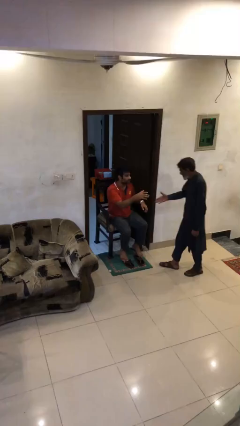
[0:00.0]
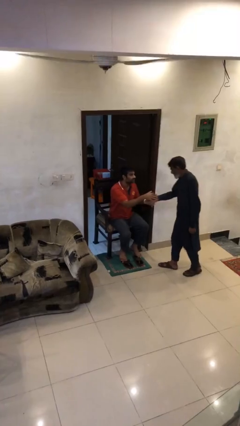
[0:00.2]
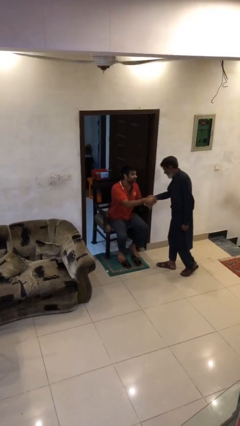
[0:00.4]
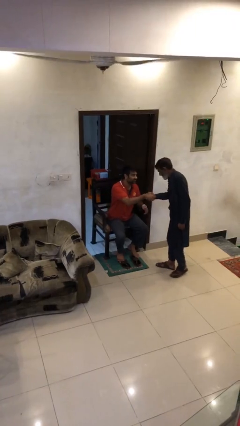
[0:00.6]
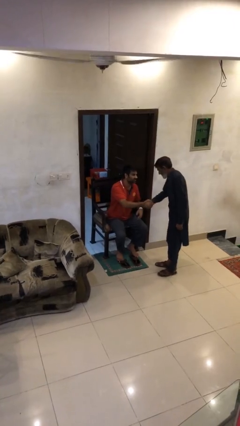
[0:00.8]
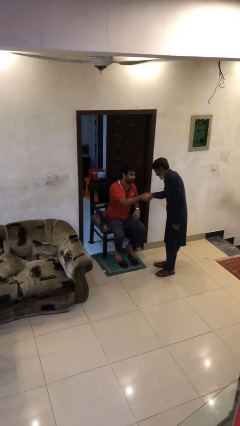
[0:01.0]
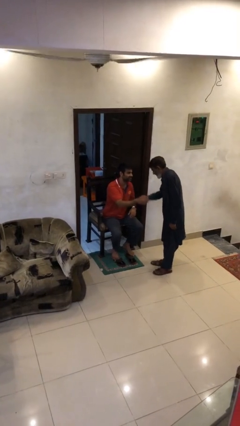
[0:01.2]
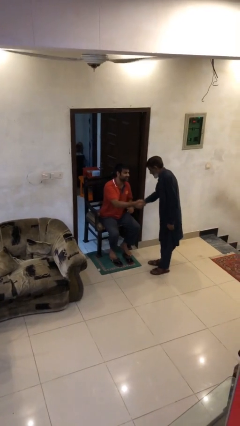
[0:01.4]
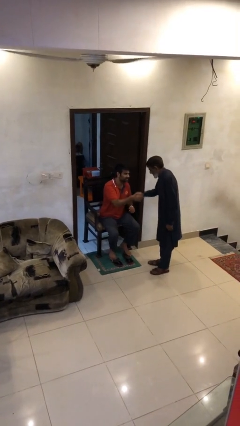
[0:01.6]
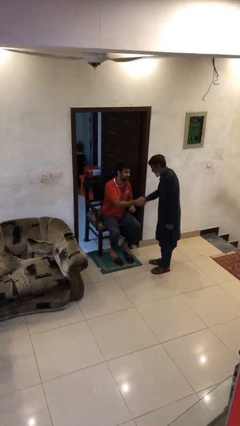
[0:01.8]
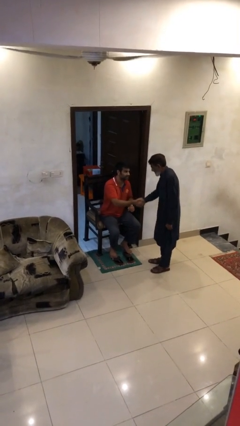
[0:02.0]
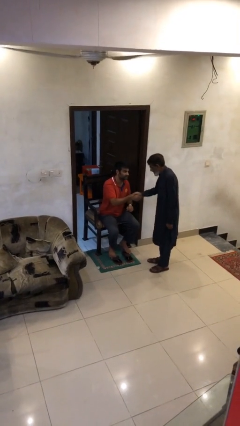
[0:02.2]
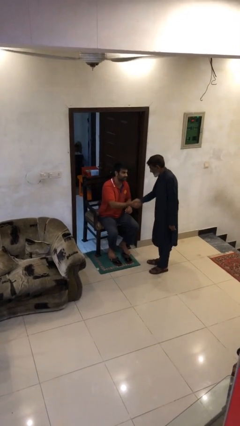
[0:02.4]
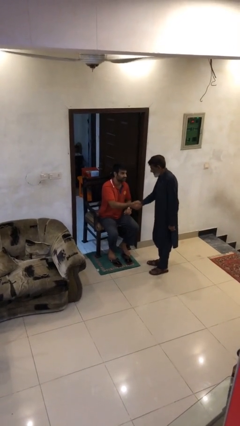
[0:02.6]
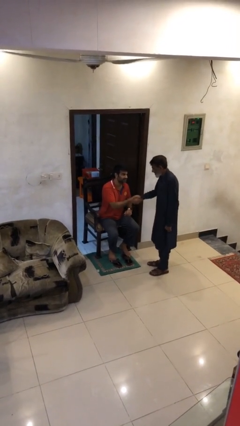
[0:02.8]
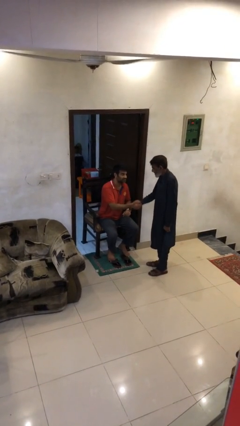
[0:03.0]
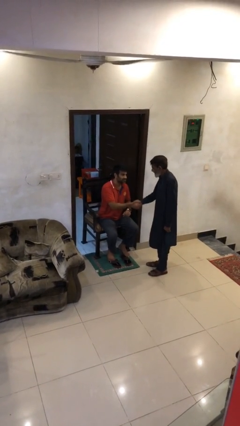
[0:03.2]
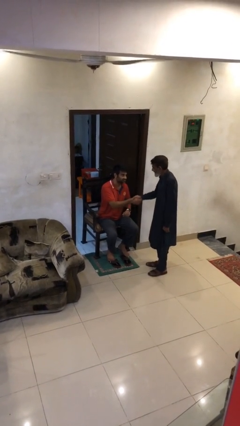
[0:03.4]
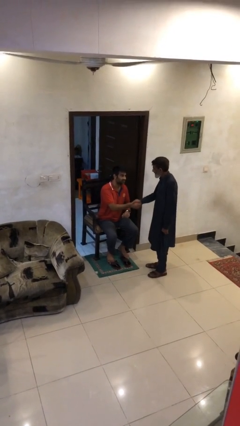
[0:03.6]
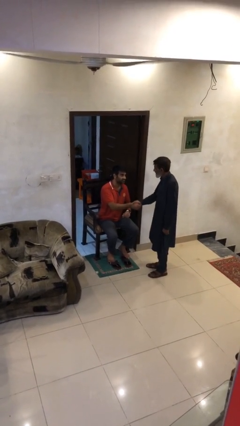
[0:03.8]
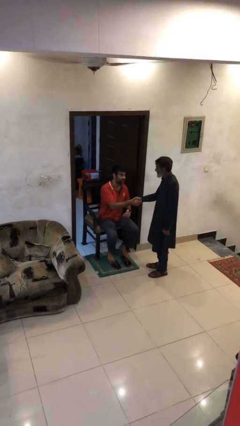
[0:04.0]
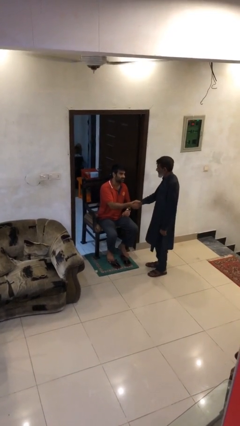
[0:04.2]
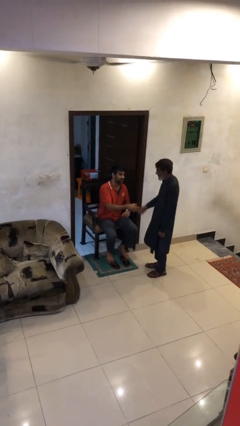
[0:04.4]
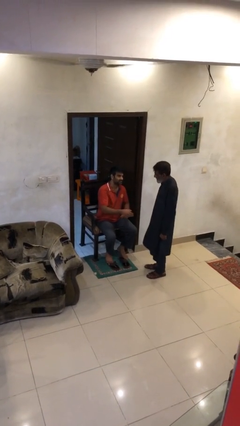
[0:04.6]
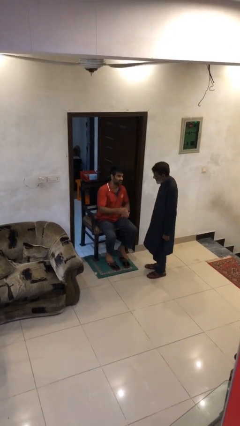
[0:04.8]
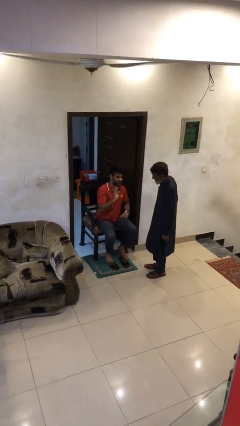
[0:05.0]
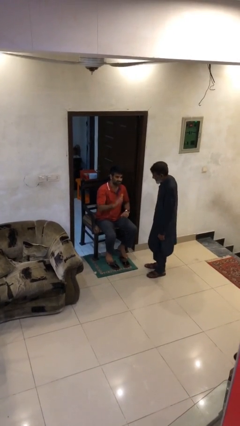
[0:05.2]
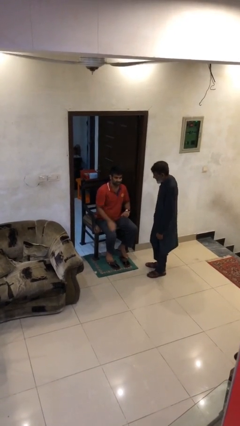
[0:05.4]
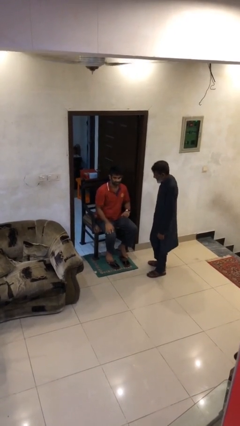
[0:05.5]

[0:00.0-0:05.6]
person shakes hand

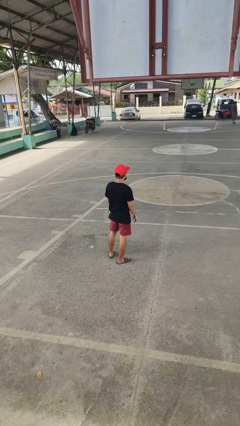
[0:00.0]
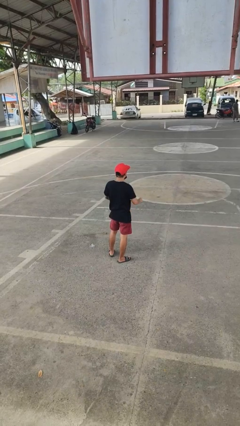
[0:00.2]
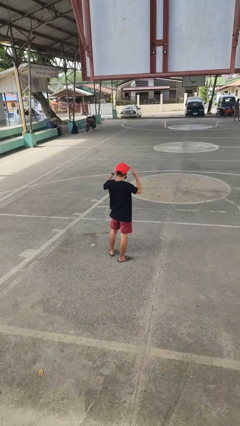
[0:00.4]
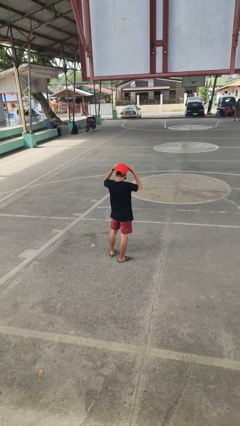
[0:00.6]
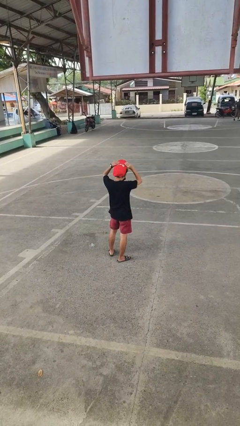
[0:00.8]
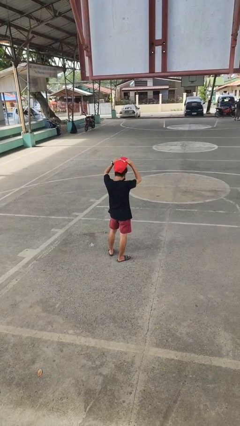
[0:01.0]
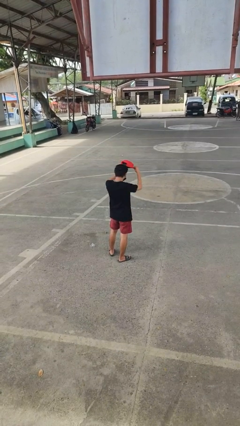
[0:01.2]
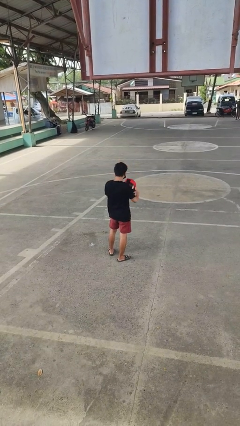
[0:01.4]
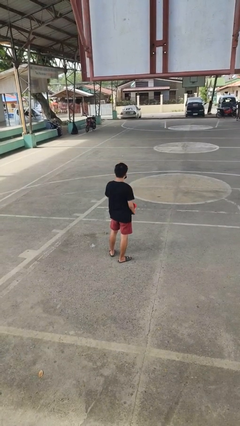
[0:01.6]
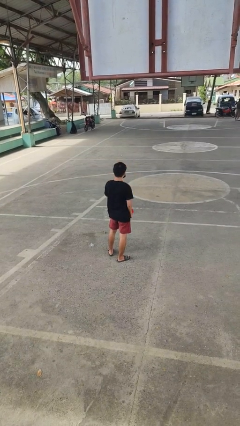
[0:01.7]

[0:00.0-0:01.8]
person takes off hat

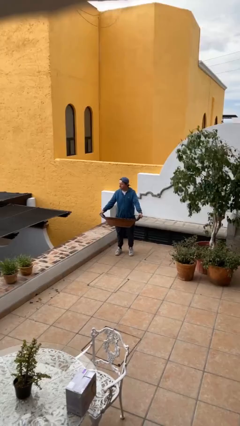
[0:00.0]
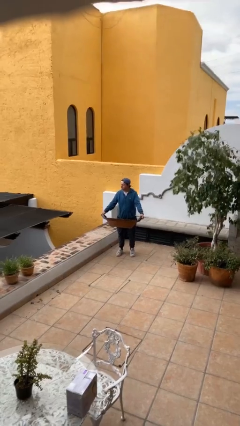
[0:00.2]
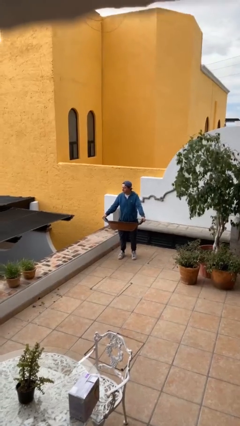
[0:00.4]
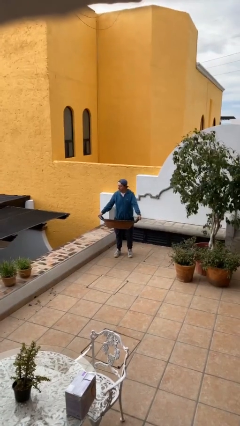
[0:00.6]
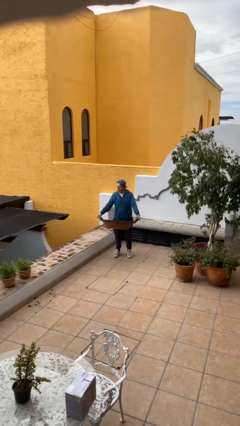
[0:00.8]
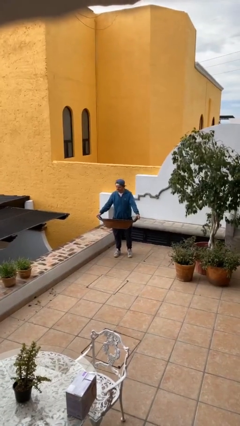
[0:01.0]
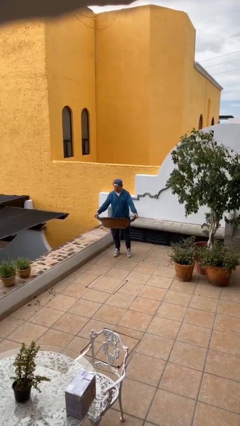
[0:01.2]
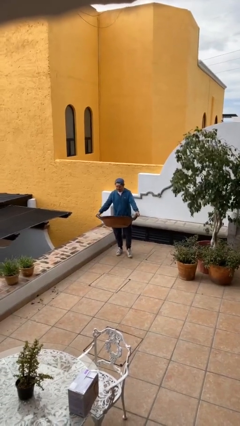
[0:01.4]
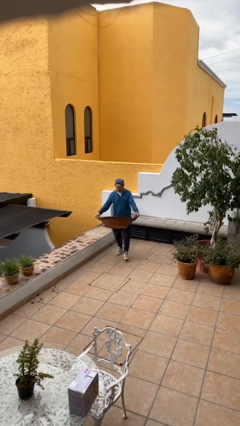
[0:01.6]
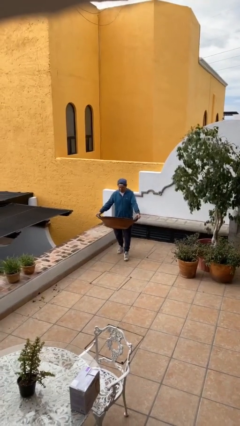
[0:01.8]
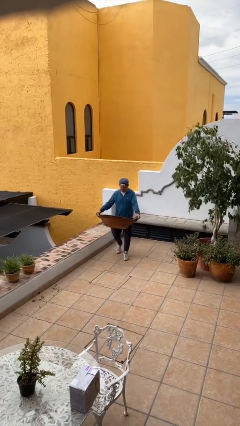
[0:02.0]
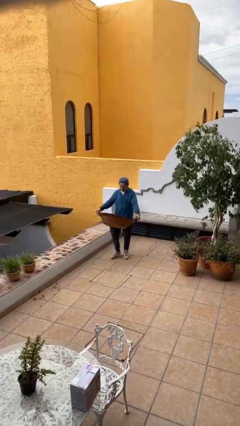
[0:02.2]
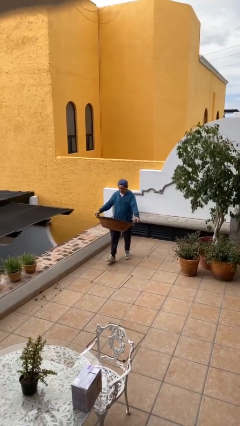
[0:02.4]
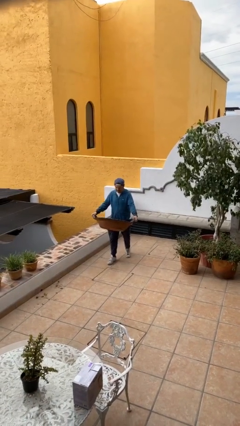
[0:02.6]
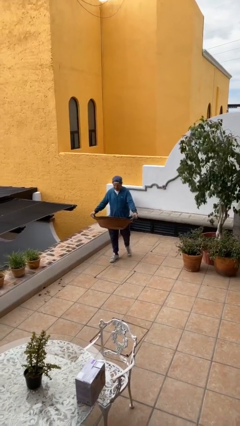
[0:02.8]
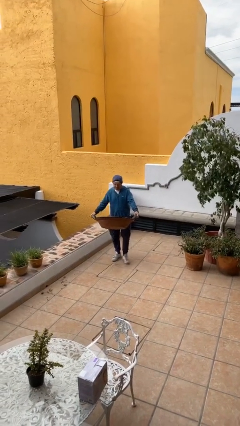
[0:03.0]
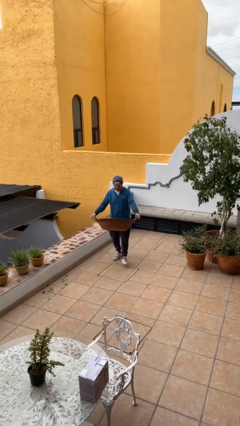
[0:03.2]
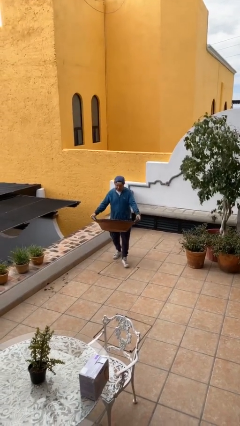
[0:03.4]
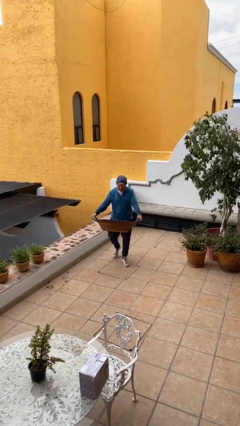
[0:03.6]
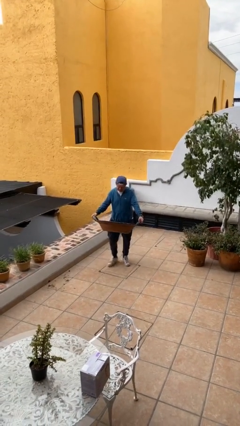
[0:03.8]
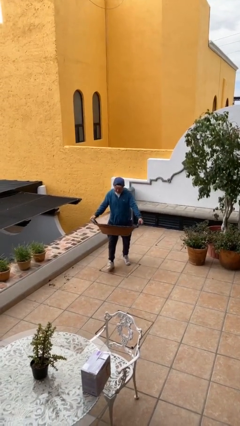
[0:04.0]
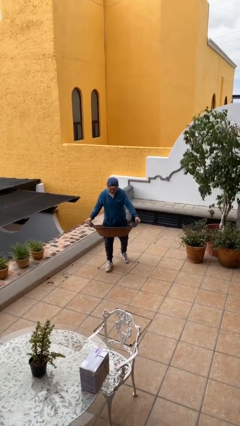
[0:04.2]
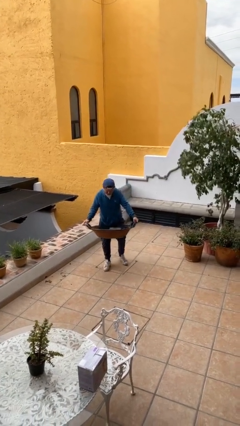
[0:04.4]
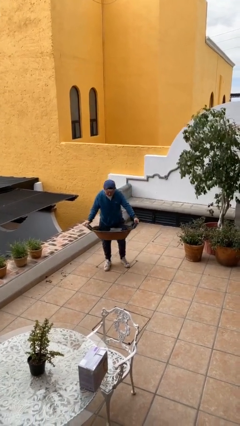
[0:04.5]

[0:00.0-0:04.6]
person carries heavy object

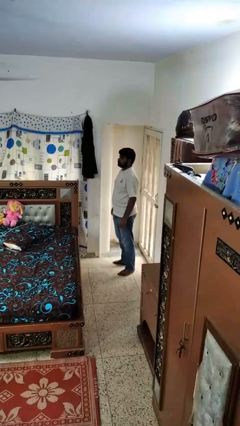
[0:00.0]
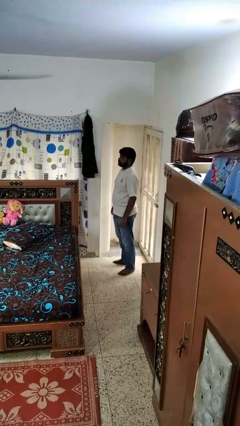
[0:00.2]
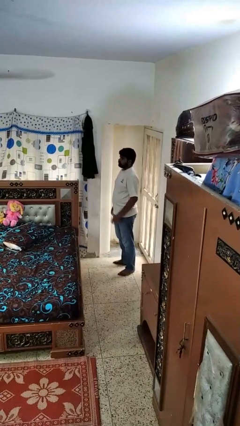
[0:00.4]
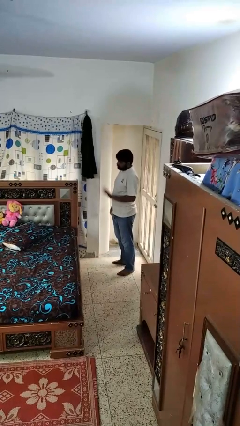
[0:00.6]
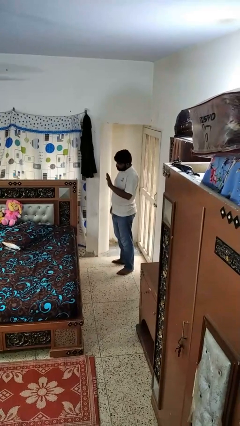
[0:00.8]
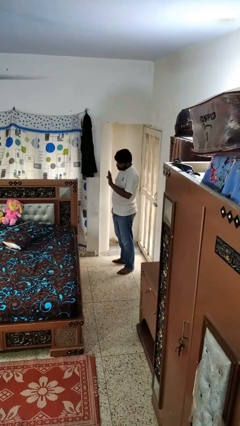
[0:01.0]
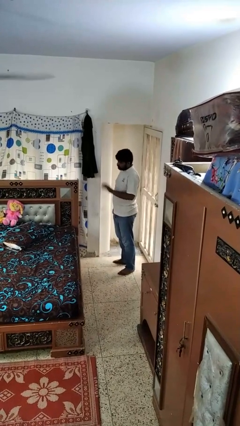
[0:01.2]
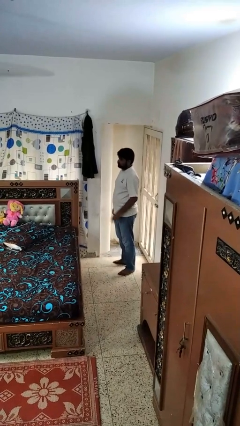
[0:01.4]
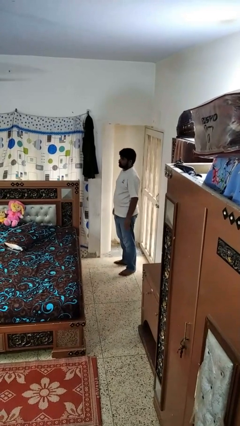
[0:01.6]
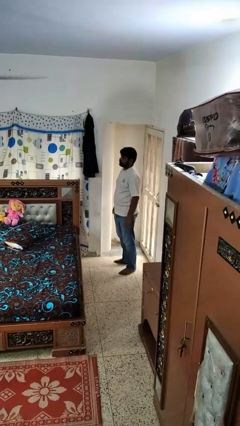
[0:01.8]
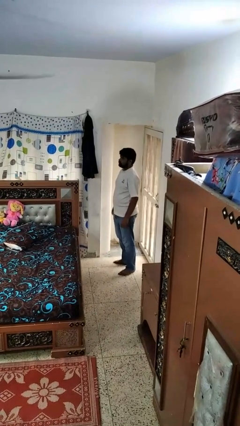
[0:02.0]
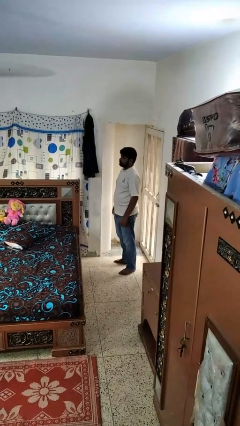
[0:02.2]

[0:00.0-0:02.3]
person waves at person

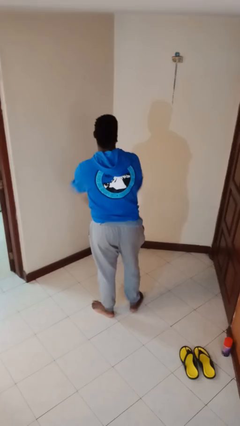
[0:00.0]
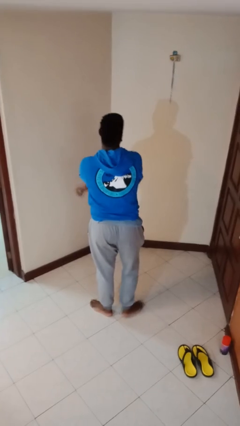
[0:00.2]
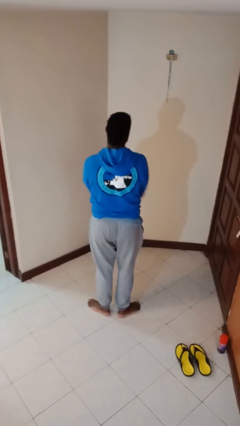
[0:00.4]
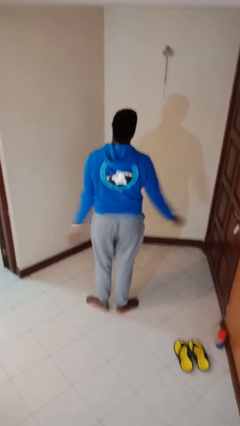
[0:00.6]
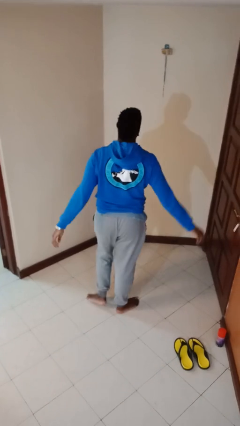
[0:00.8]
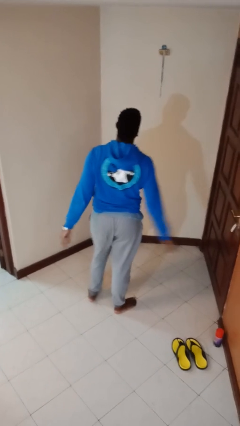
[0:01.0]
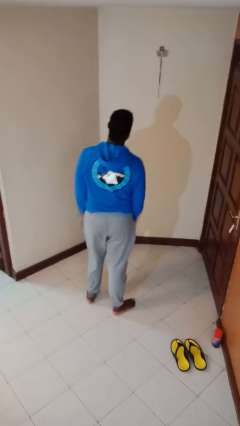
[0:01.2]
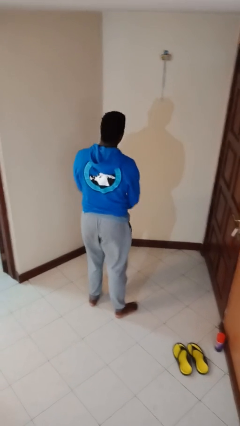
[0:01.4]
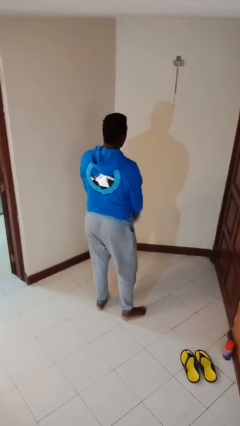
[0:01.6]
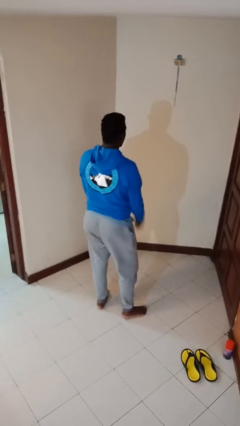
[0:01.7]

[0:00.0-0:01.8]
person dances in place

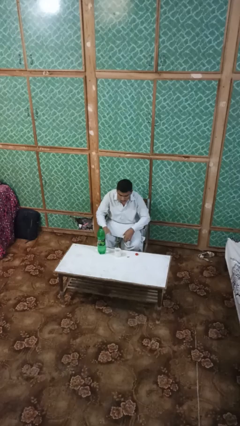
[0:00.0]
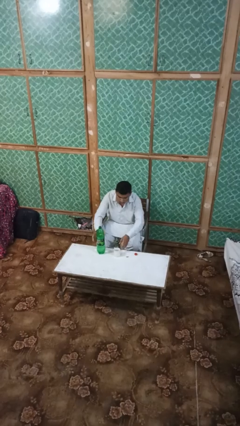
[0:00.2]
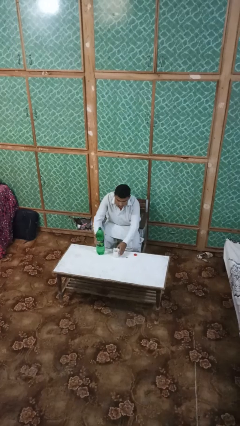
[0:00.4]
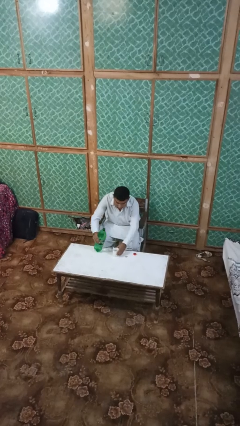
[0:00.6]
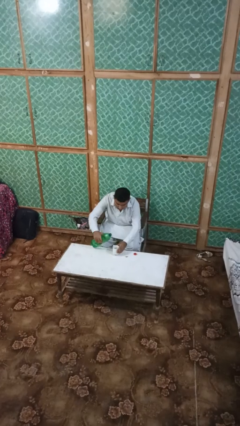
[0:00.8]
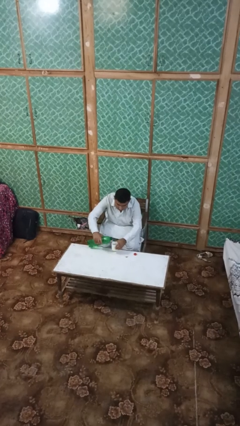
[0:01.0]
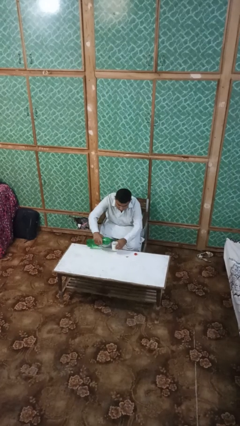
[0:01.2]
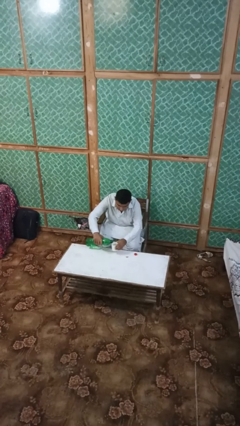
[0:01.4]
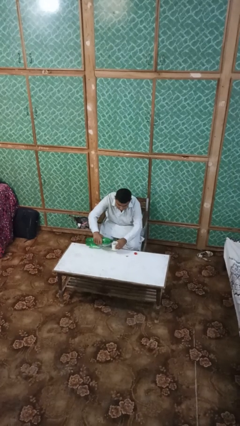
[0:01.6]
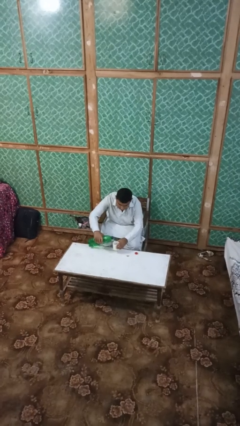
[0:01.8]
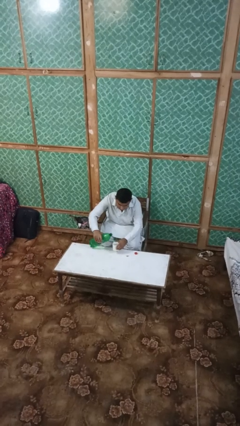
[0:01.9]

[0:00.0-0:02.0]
person pours liquid into cup
